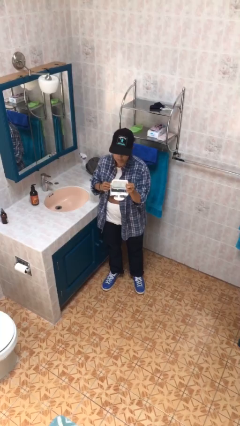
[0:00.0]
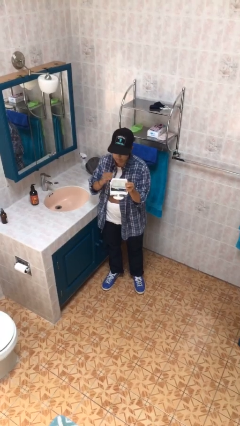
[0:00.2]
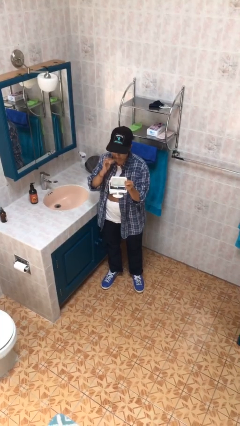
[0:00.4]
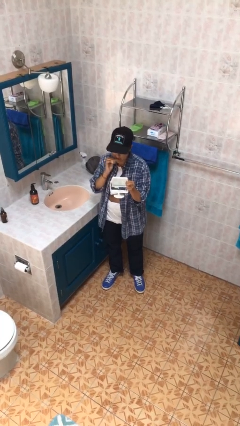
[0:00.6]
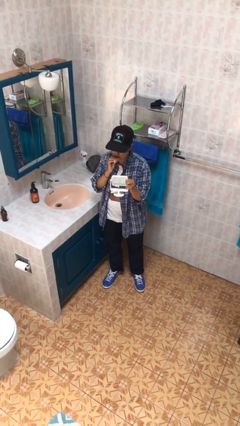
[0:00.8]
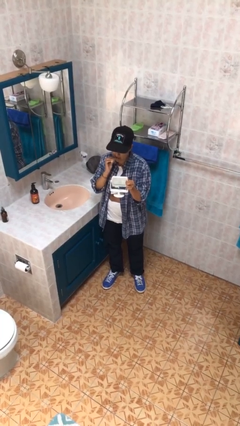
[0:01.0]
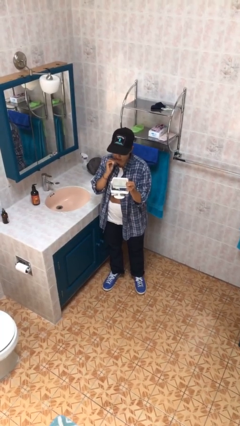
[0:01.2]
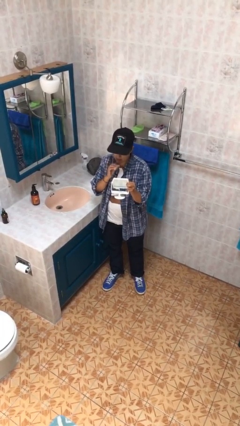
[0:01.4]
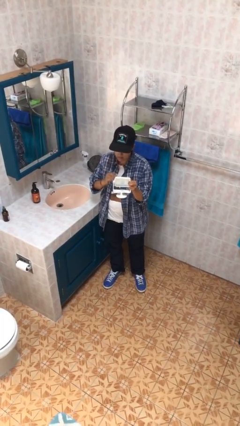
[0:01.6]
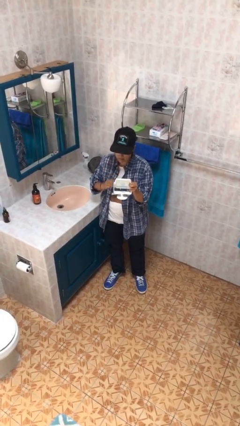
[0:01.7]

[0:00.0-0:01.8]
person applies lip makeup

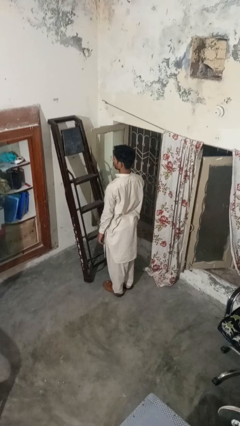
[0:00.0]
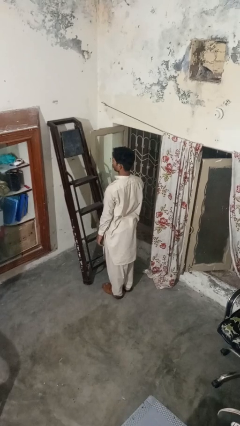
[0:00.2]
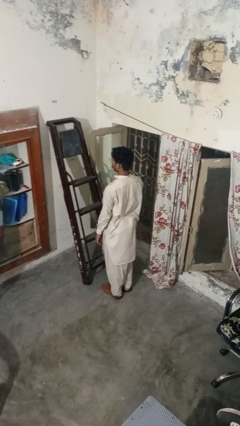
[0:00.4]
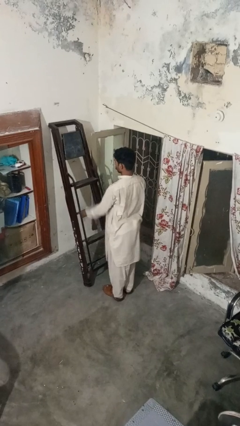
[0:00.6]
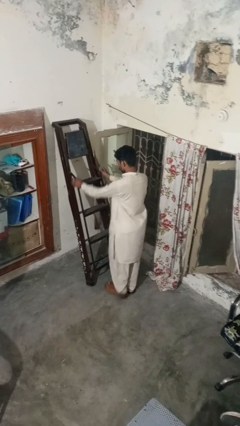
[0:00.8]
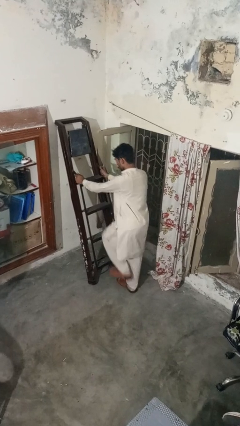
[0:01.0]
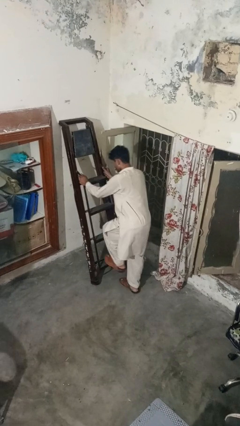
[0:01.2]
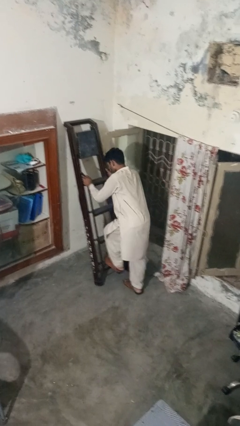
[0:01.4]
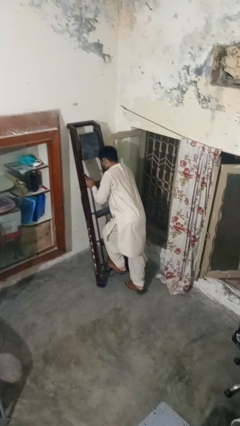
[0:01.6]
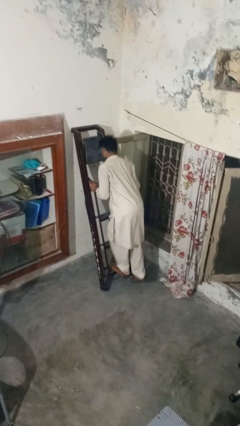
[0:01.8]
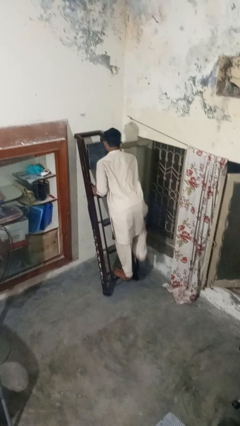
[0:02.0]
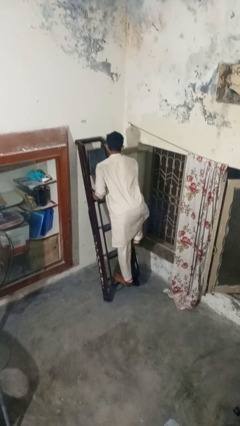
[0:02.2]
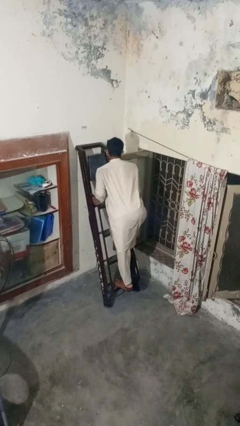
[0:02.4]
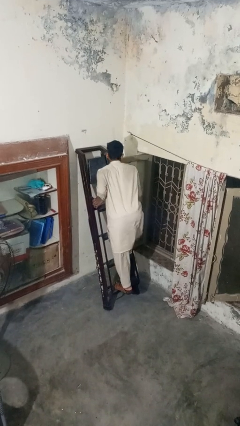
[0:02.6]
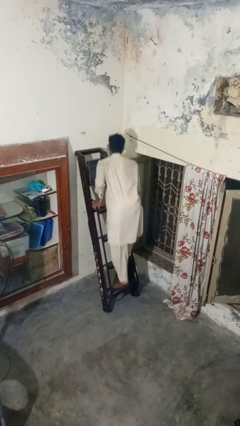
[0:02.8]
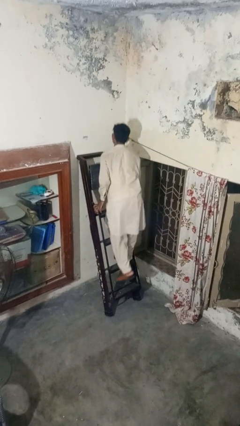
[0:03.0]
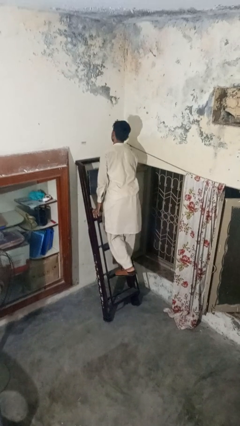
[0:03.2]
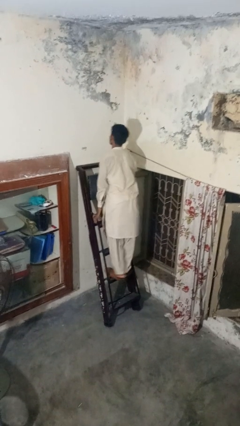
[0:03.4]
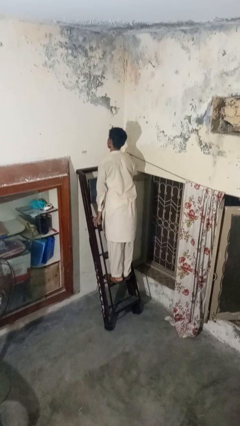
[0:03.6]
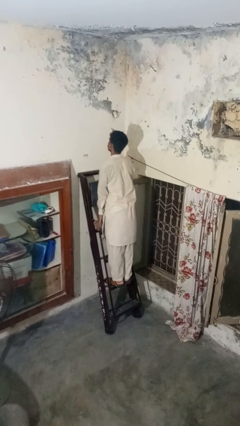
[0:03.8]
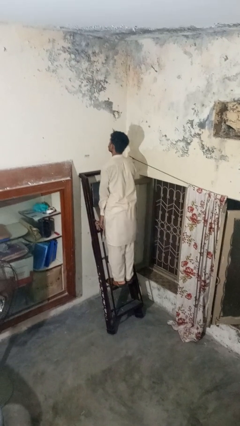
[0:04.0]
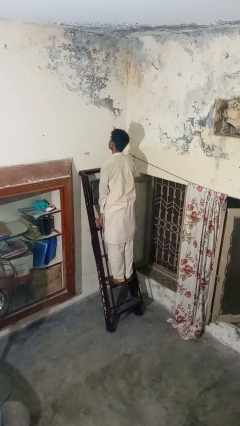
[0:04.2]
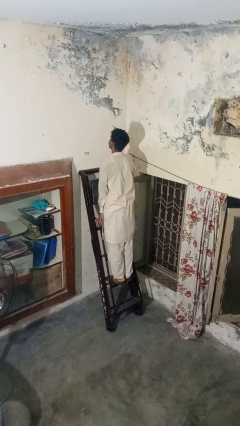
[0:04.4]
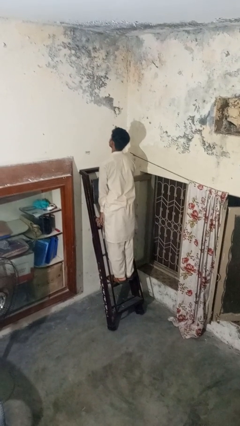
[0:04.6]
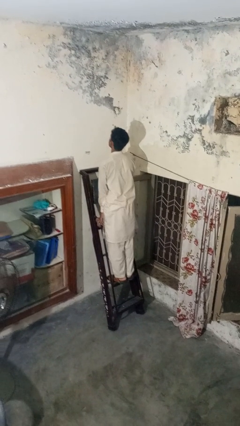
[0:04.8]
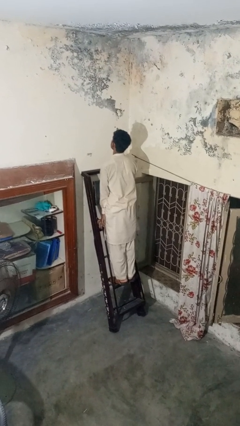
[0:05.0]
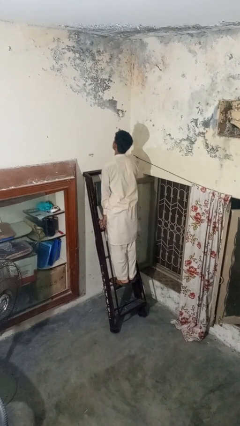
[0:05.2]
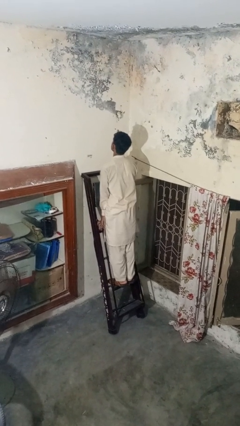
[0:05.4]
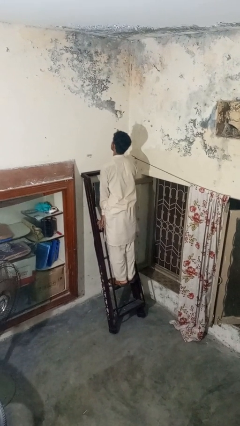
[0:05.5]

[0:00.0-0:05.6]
person climbs up ladder

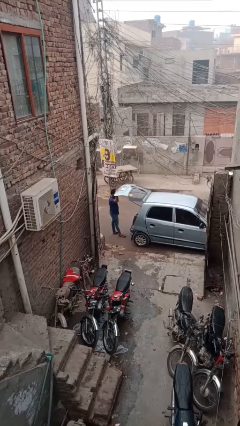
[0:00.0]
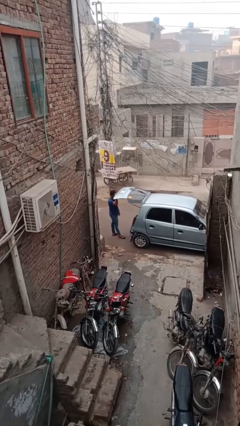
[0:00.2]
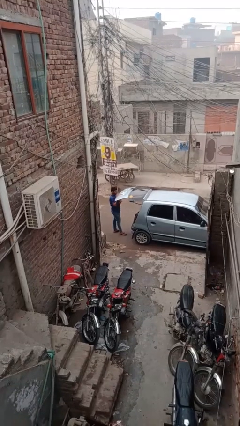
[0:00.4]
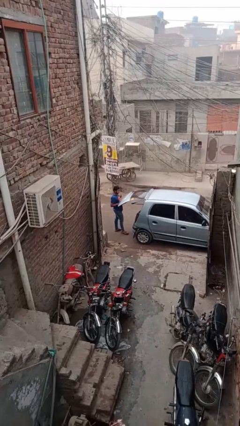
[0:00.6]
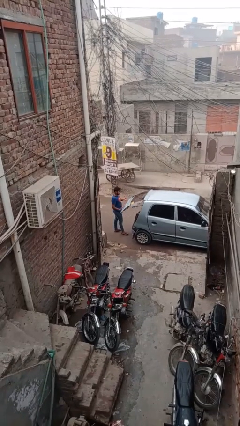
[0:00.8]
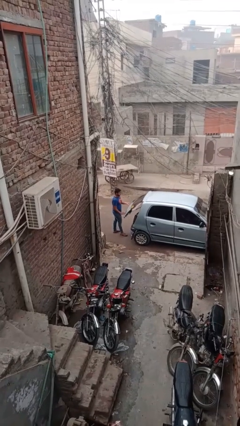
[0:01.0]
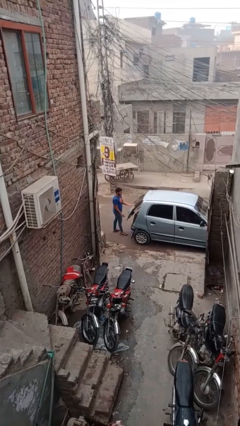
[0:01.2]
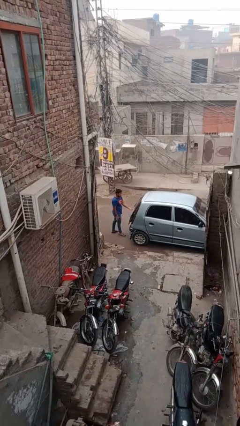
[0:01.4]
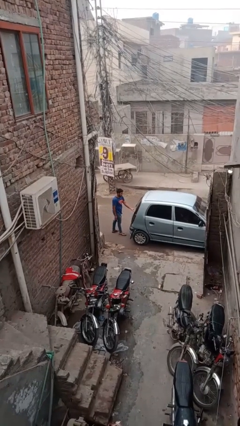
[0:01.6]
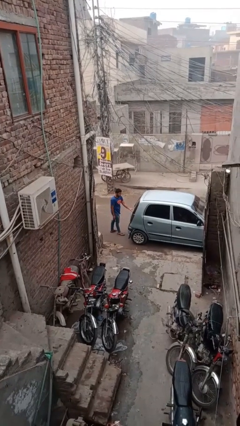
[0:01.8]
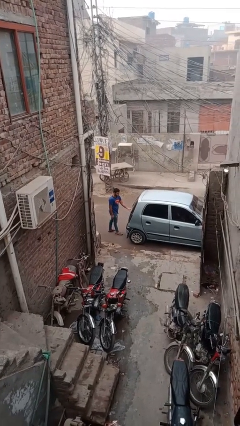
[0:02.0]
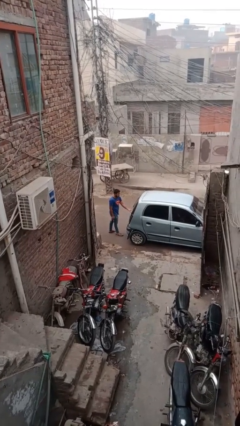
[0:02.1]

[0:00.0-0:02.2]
person closes car trunk

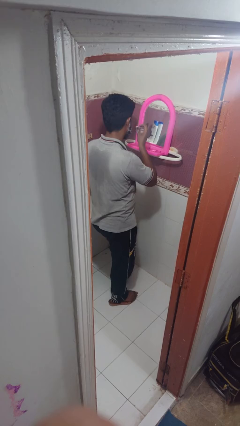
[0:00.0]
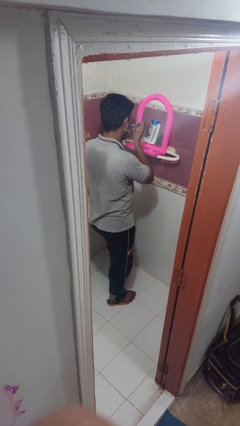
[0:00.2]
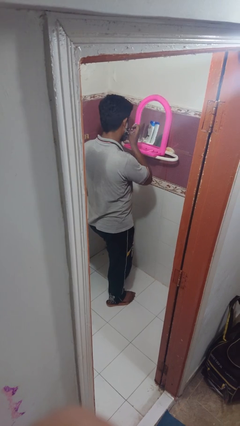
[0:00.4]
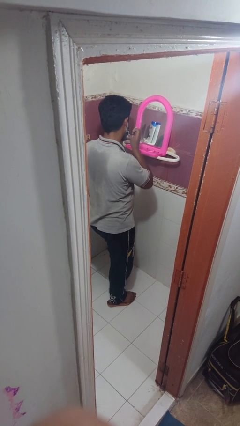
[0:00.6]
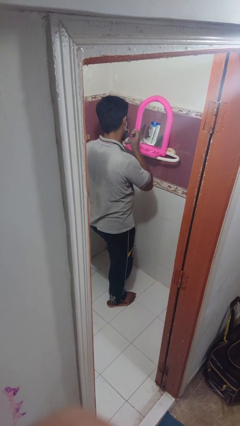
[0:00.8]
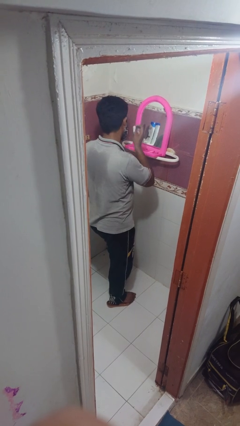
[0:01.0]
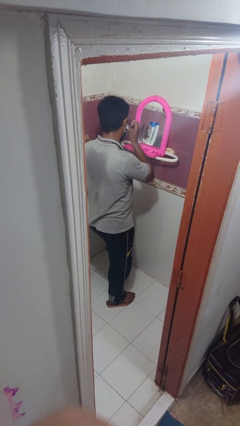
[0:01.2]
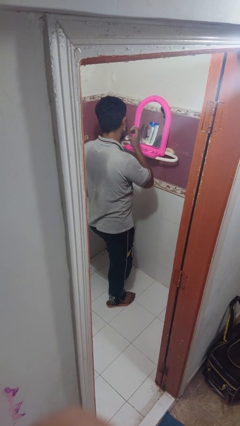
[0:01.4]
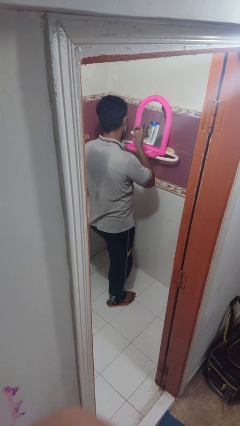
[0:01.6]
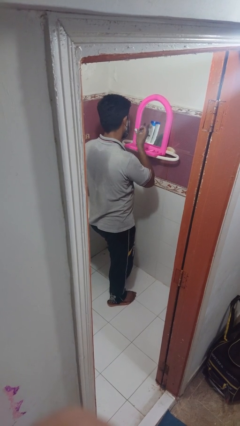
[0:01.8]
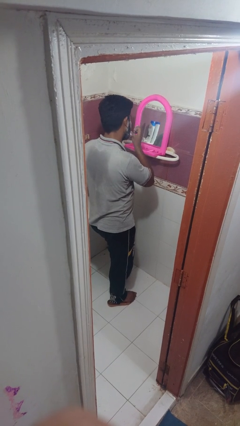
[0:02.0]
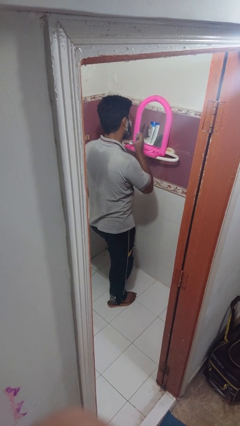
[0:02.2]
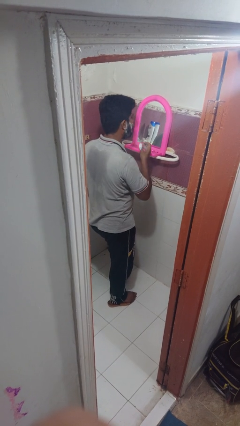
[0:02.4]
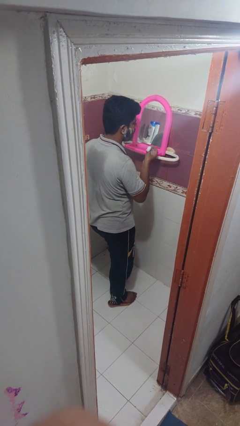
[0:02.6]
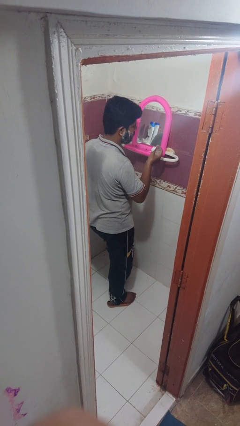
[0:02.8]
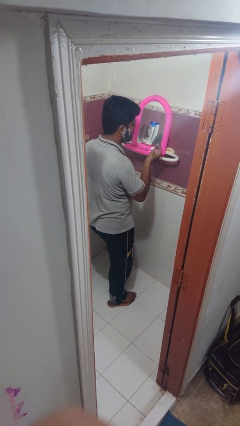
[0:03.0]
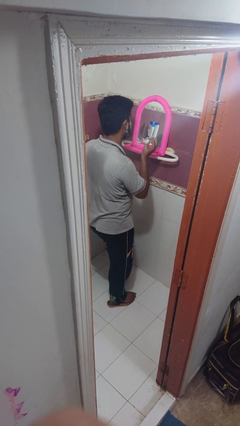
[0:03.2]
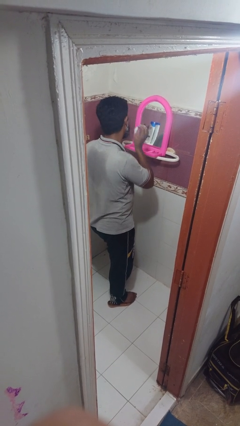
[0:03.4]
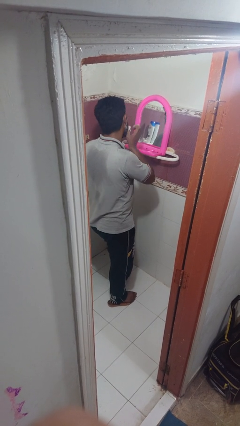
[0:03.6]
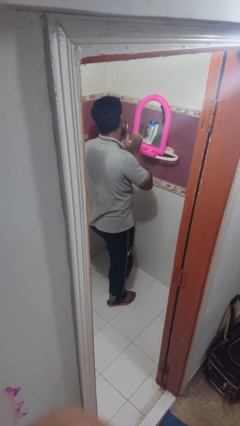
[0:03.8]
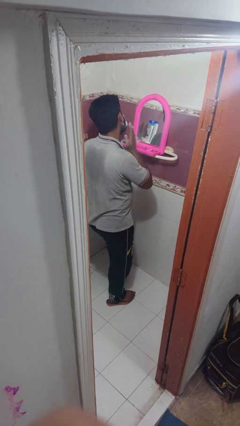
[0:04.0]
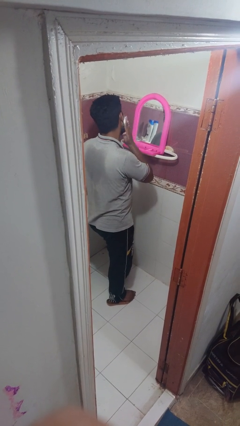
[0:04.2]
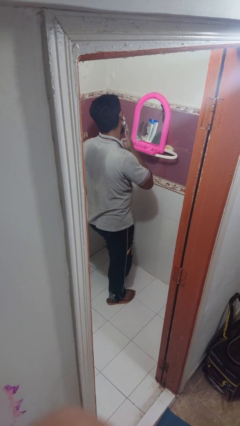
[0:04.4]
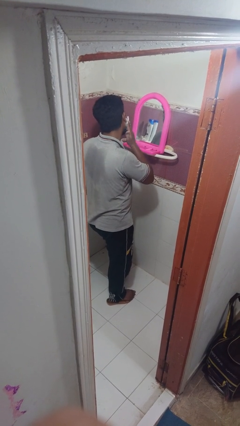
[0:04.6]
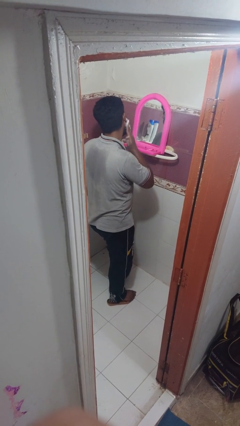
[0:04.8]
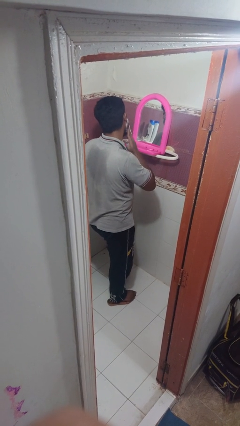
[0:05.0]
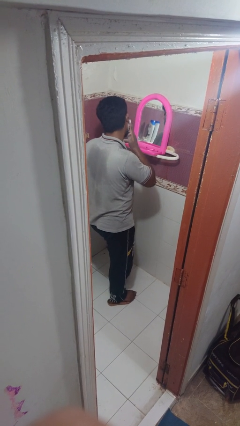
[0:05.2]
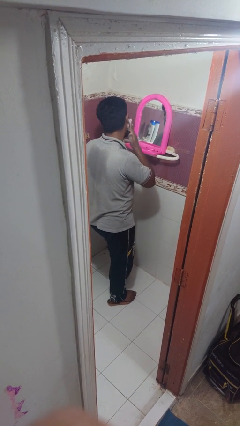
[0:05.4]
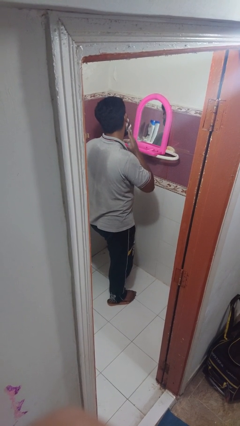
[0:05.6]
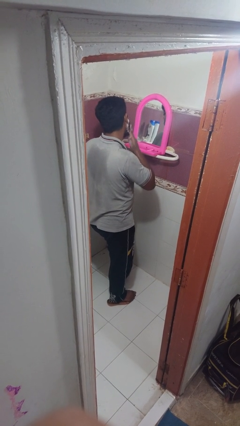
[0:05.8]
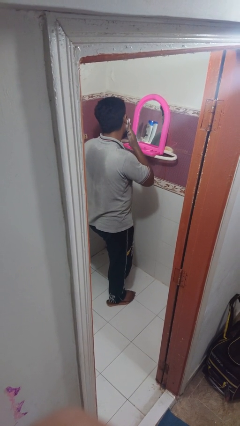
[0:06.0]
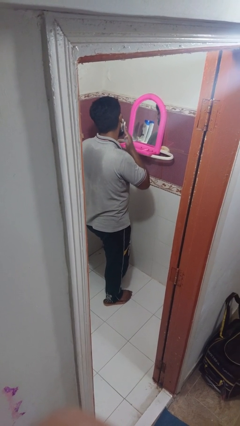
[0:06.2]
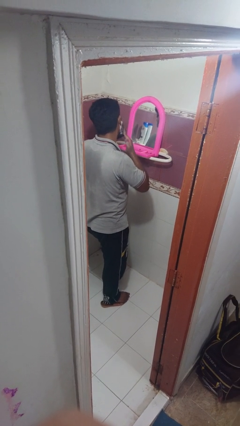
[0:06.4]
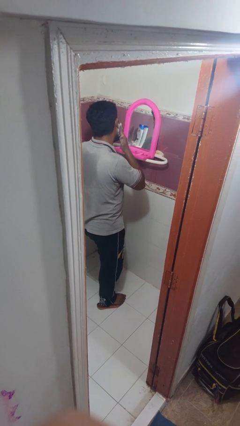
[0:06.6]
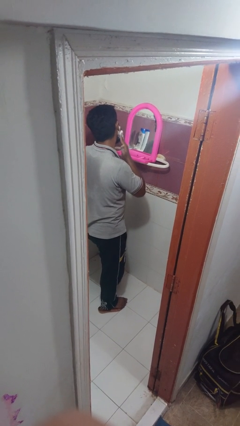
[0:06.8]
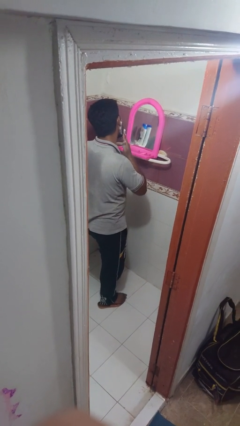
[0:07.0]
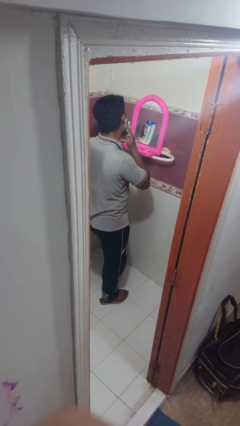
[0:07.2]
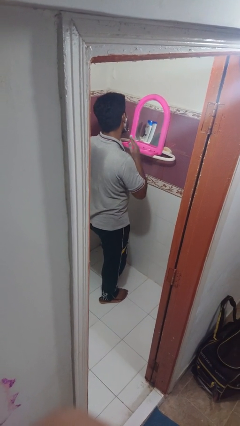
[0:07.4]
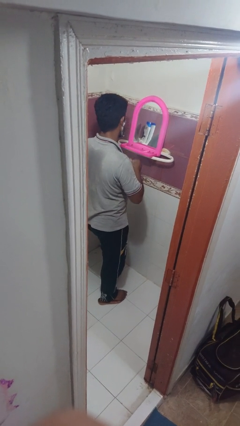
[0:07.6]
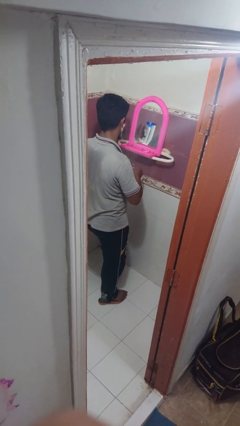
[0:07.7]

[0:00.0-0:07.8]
person applies shaving cream

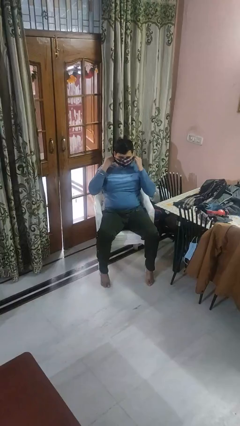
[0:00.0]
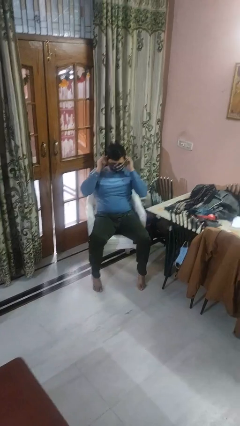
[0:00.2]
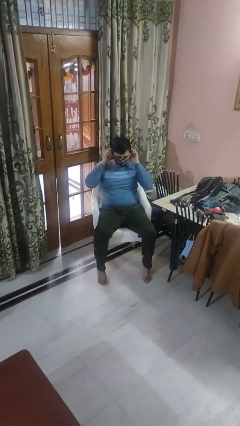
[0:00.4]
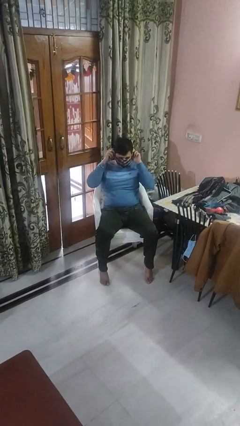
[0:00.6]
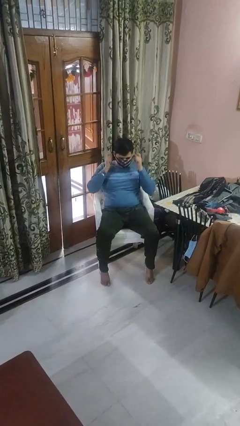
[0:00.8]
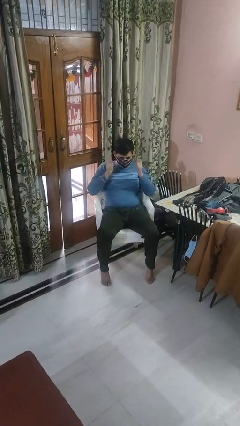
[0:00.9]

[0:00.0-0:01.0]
person puts on facemask
